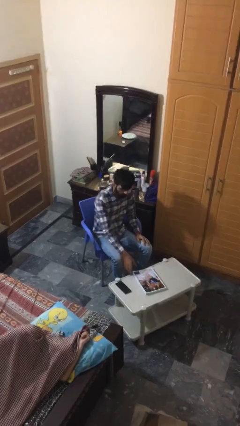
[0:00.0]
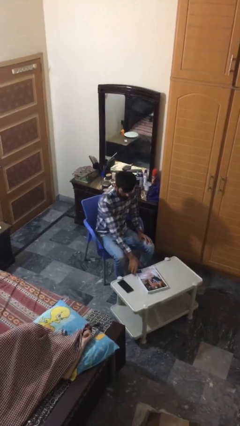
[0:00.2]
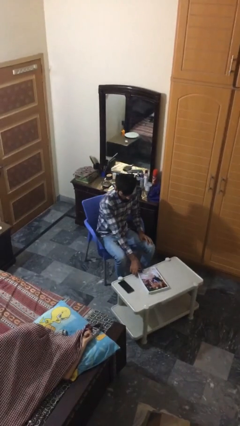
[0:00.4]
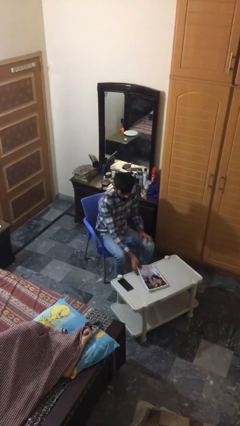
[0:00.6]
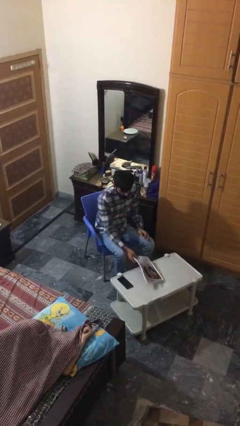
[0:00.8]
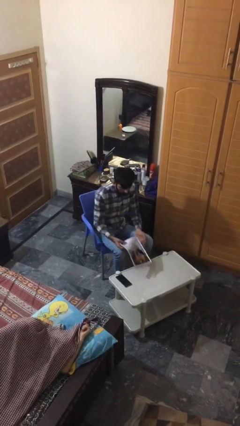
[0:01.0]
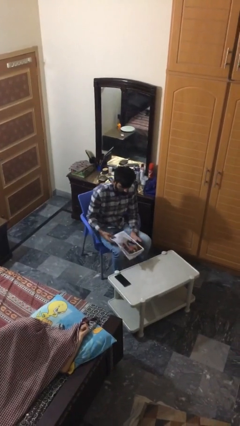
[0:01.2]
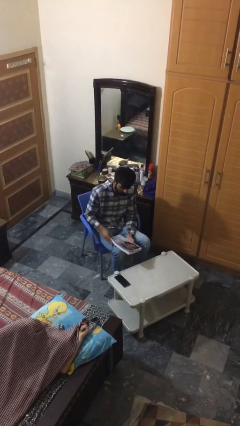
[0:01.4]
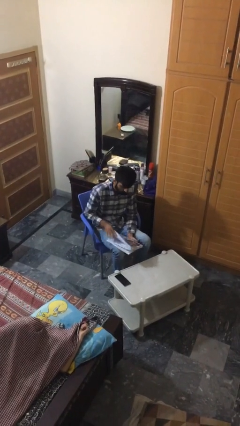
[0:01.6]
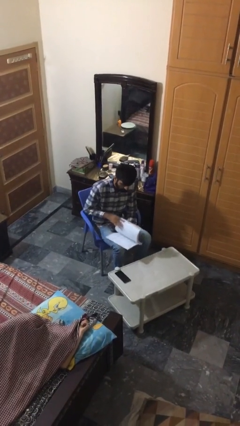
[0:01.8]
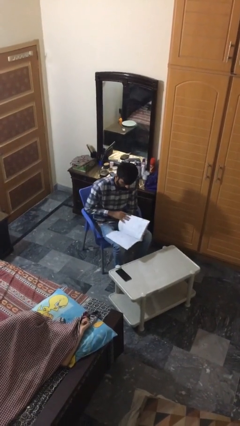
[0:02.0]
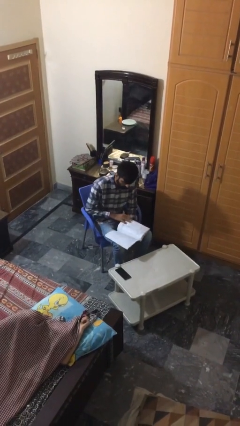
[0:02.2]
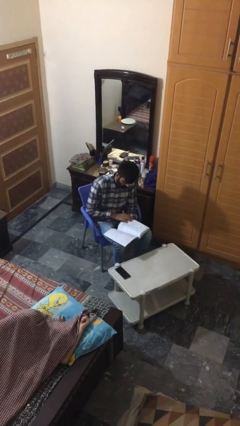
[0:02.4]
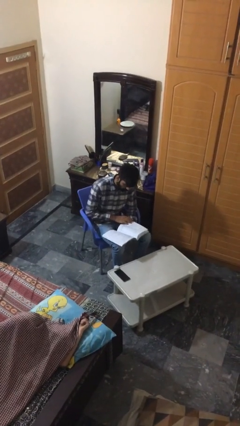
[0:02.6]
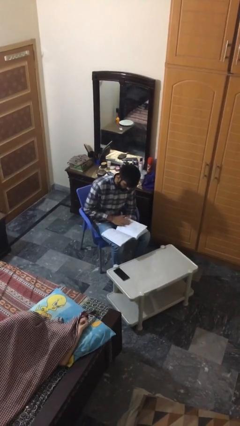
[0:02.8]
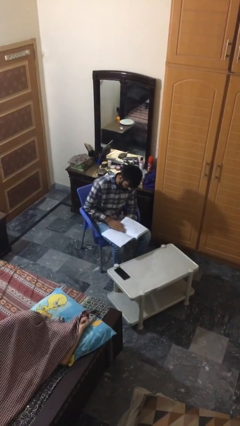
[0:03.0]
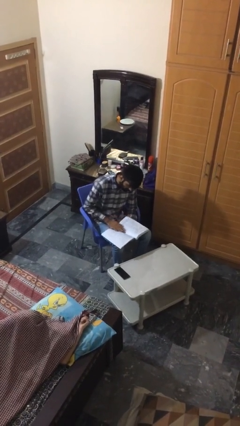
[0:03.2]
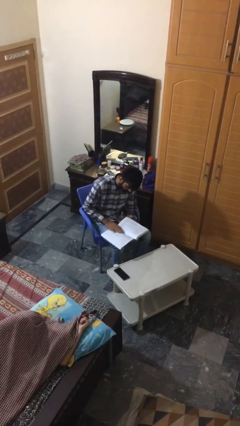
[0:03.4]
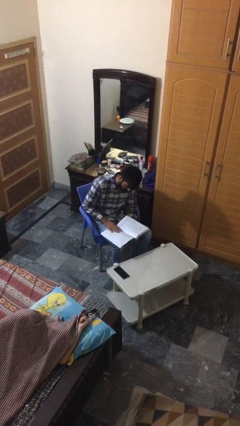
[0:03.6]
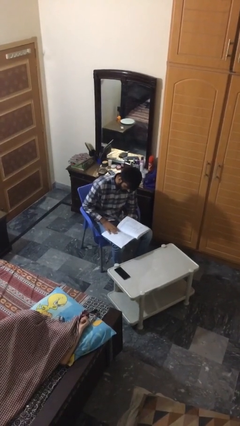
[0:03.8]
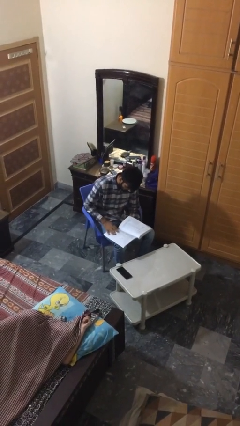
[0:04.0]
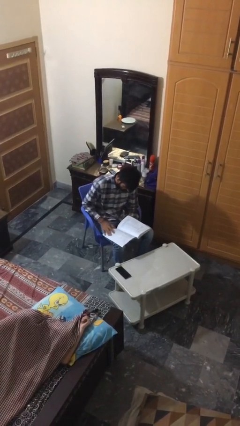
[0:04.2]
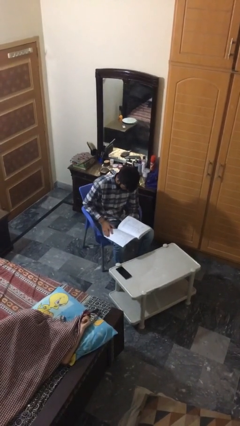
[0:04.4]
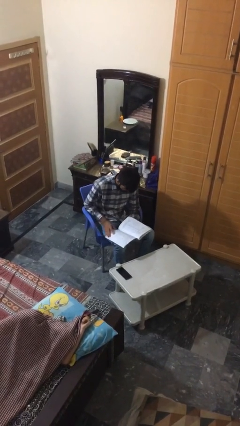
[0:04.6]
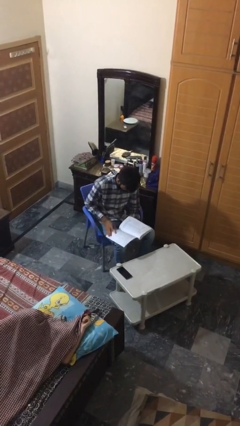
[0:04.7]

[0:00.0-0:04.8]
person reads document

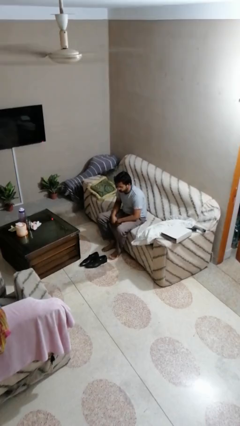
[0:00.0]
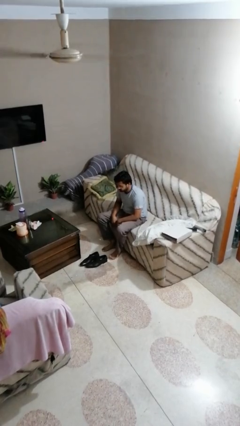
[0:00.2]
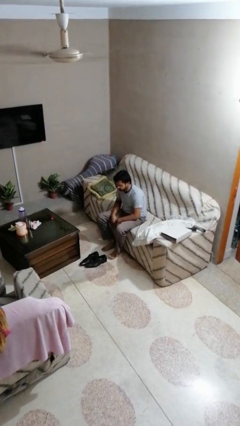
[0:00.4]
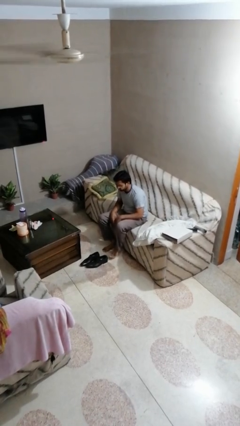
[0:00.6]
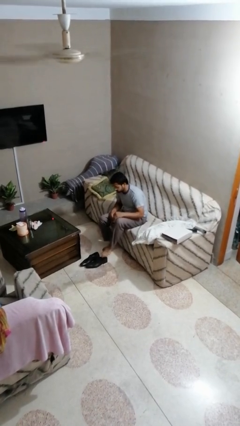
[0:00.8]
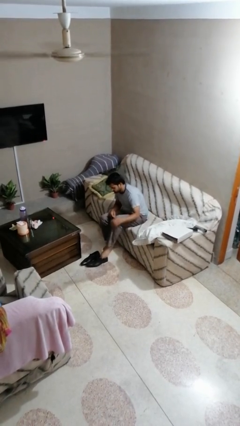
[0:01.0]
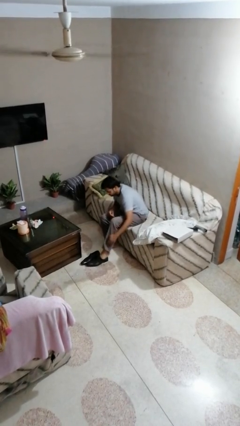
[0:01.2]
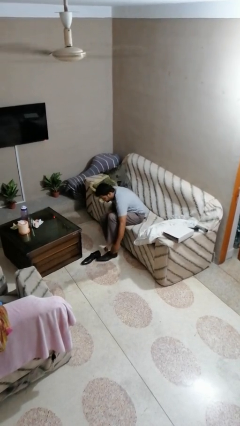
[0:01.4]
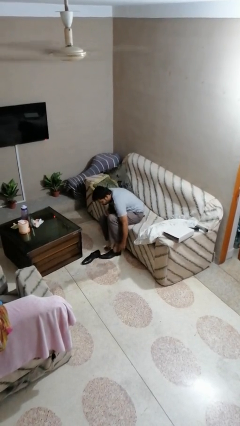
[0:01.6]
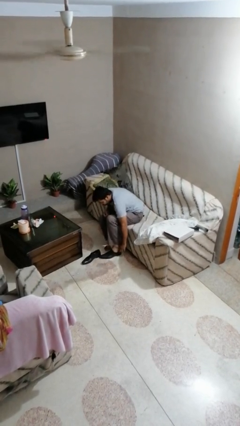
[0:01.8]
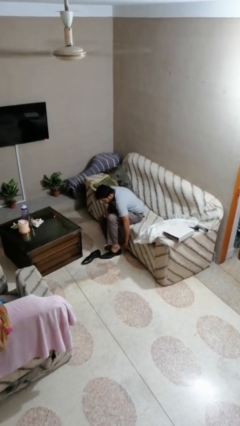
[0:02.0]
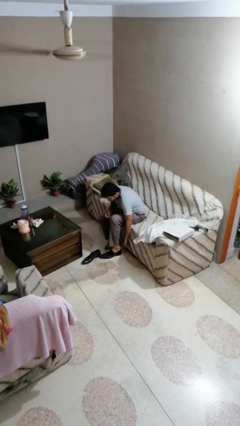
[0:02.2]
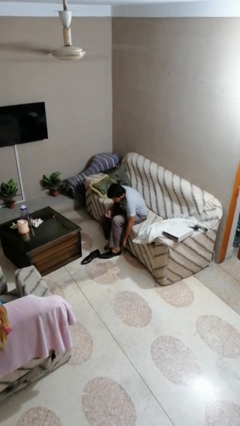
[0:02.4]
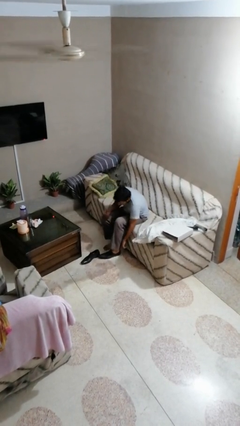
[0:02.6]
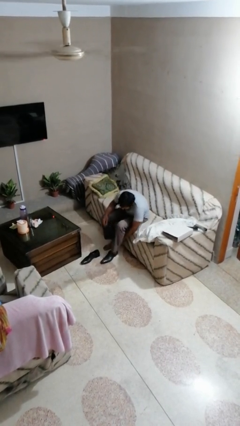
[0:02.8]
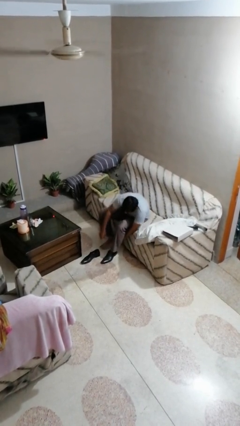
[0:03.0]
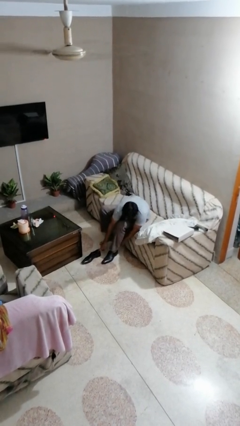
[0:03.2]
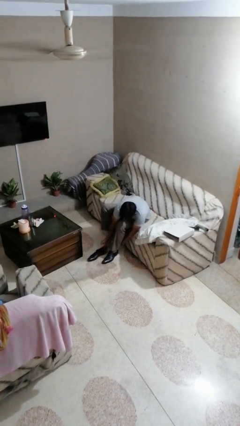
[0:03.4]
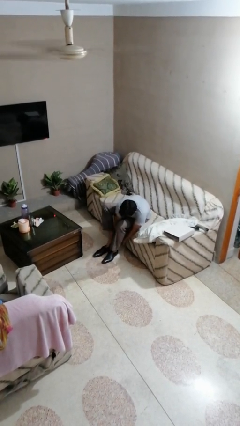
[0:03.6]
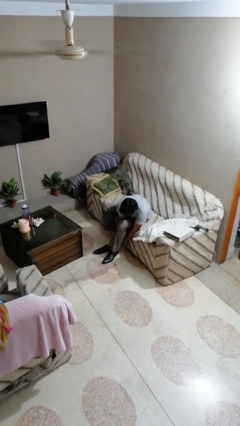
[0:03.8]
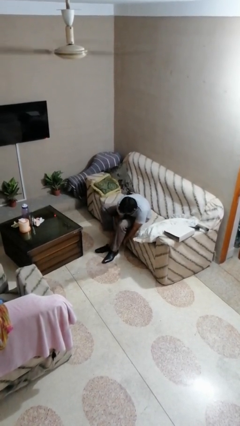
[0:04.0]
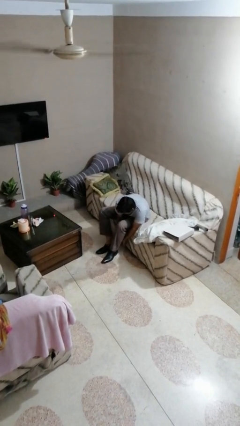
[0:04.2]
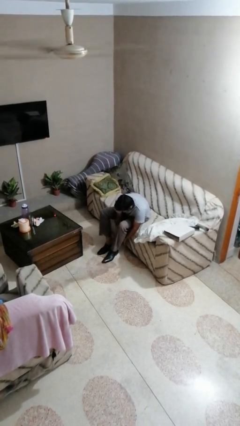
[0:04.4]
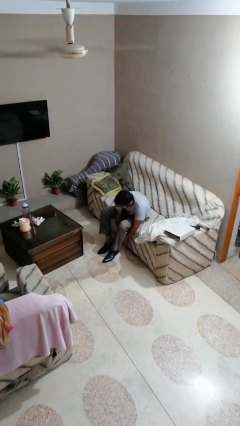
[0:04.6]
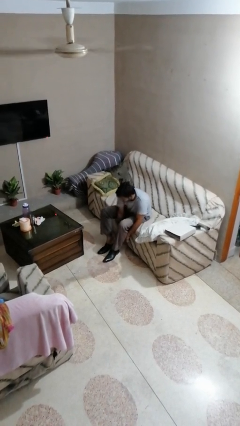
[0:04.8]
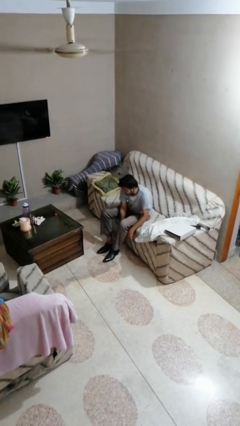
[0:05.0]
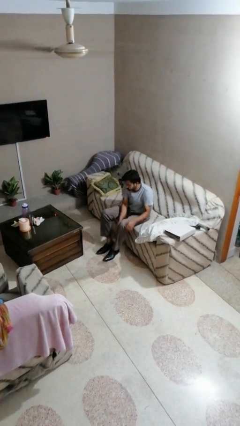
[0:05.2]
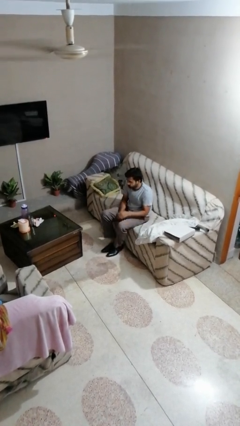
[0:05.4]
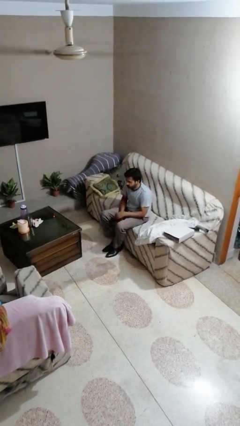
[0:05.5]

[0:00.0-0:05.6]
person puts on shoes

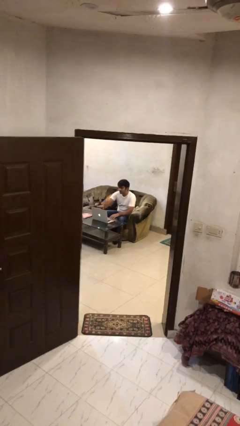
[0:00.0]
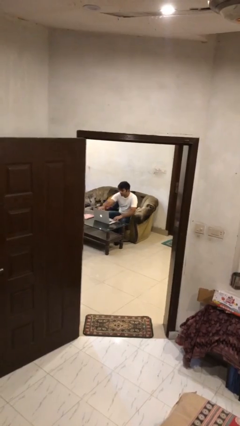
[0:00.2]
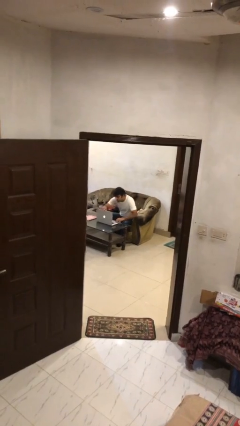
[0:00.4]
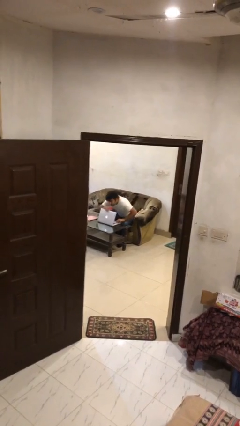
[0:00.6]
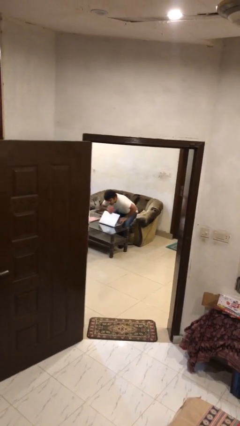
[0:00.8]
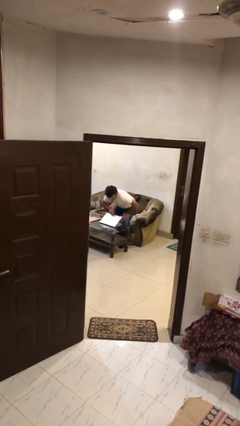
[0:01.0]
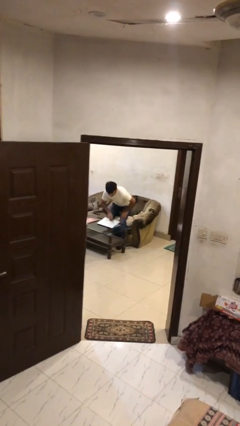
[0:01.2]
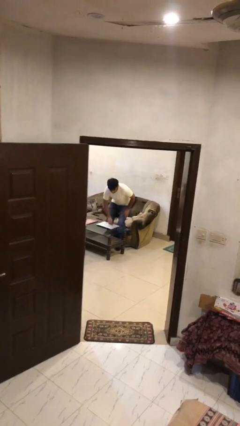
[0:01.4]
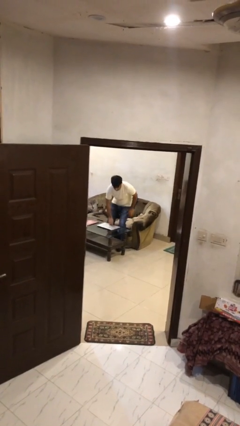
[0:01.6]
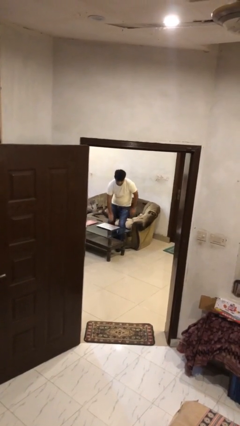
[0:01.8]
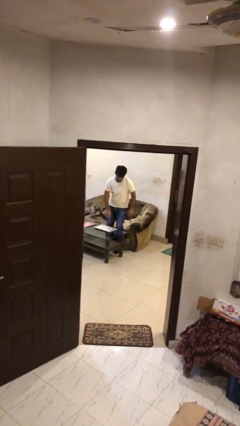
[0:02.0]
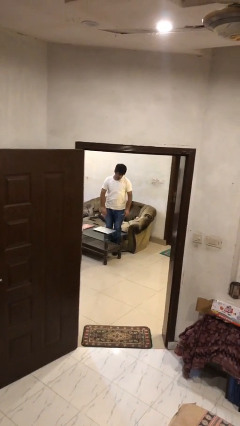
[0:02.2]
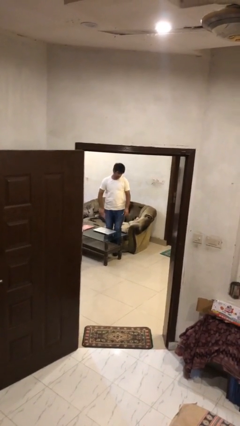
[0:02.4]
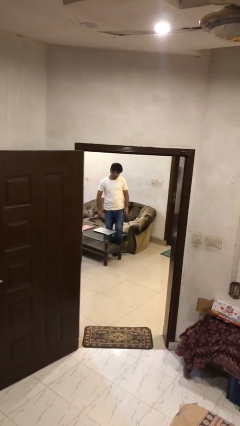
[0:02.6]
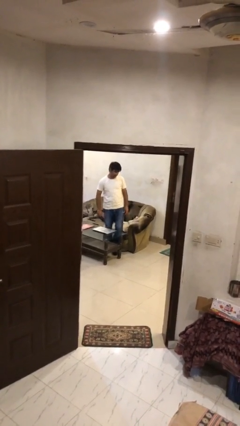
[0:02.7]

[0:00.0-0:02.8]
person stands up

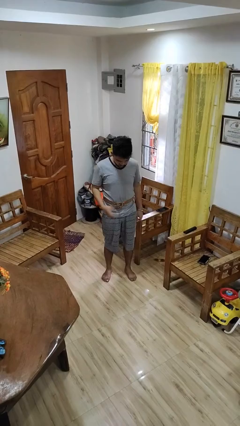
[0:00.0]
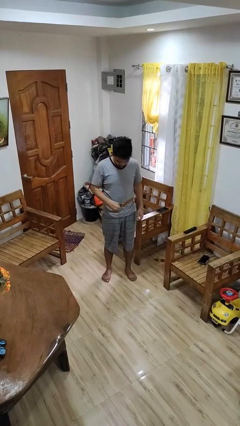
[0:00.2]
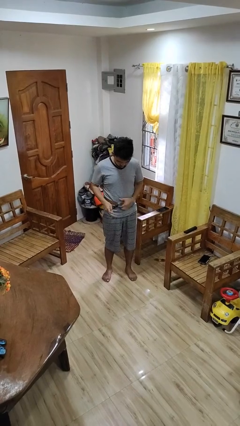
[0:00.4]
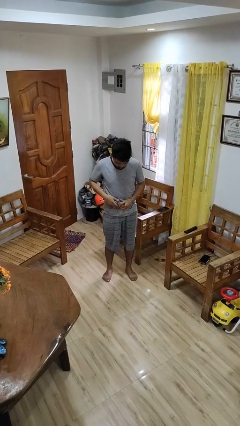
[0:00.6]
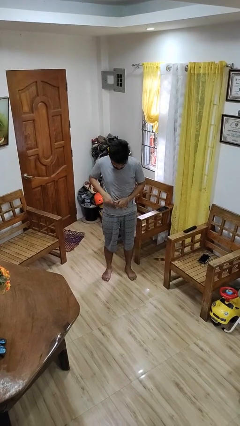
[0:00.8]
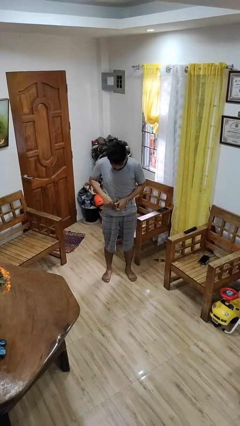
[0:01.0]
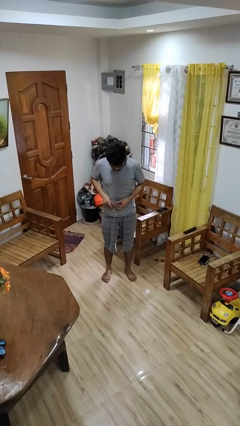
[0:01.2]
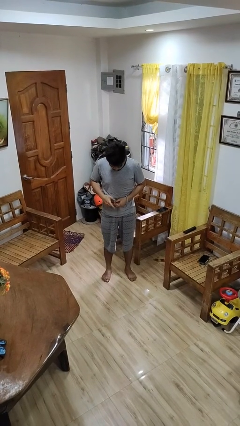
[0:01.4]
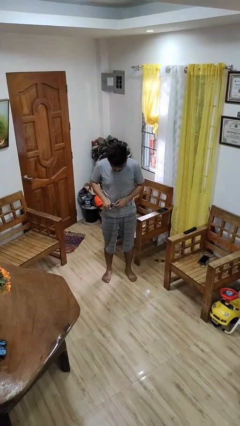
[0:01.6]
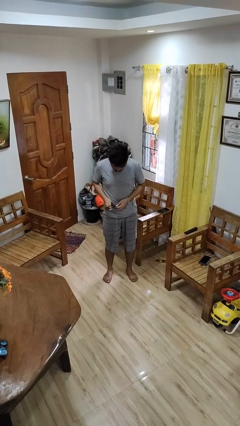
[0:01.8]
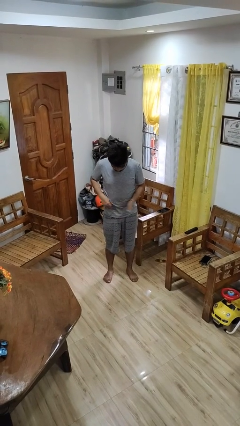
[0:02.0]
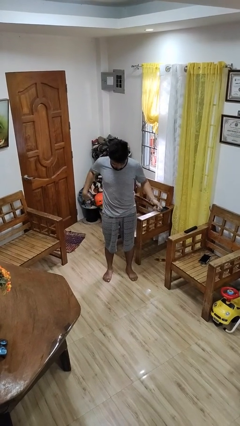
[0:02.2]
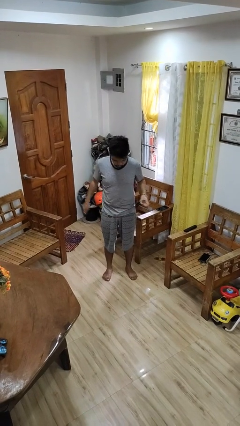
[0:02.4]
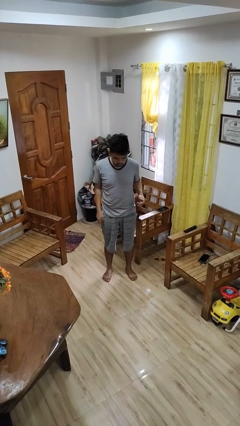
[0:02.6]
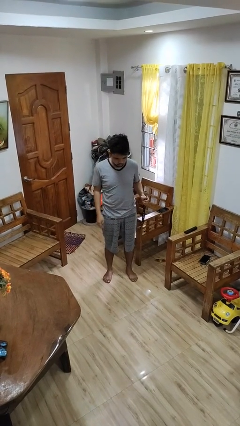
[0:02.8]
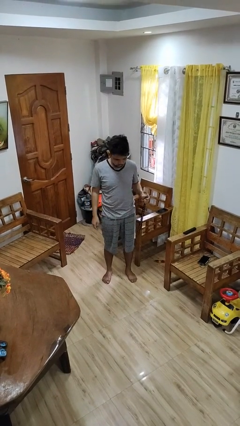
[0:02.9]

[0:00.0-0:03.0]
person takes off belt

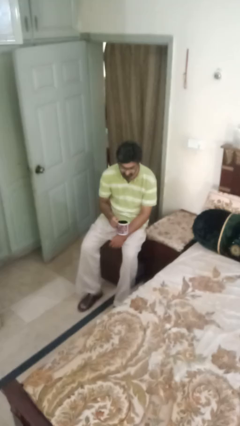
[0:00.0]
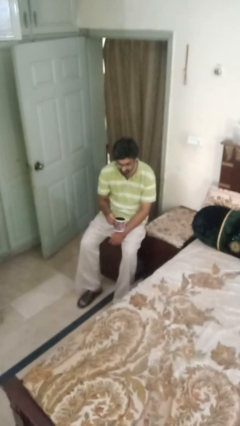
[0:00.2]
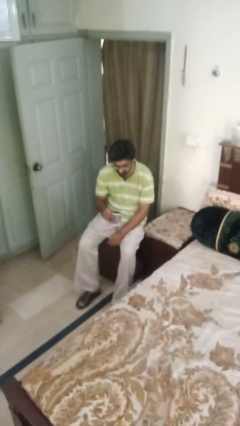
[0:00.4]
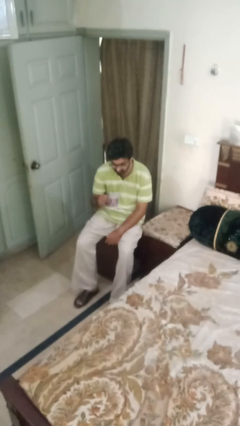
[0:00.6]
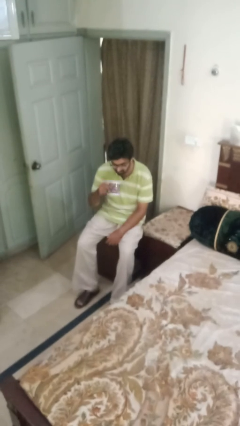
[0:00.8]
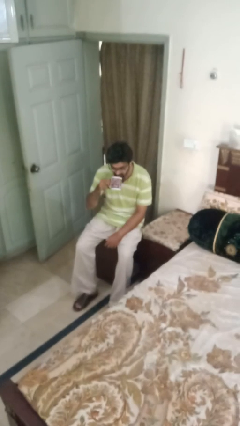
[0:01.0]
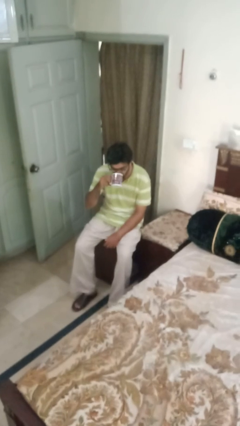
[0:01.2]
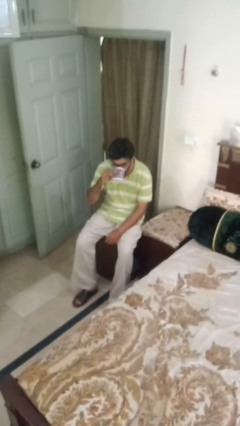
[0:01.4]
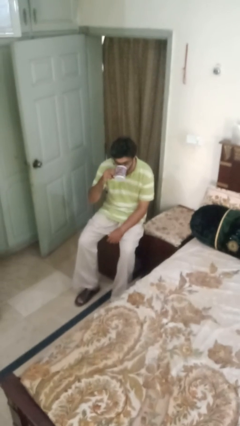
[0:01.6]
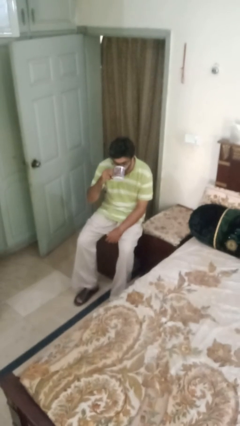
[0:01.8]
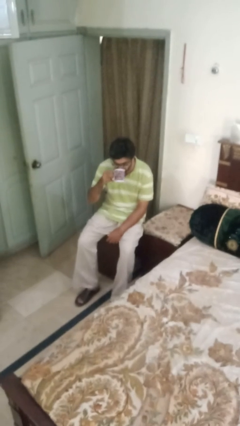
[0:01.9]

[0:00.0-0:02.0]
person drinks from mug
